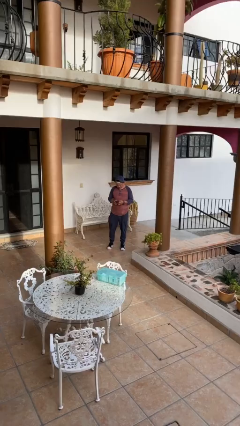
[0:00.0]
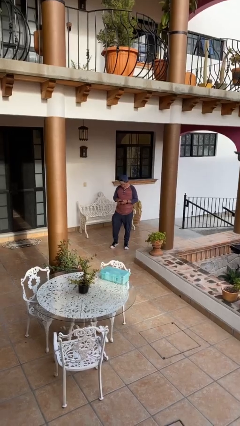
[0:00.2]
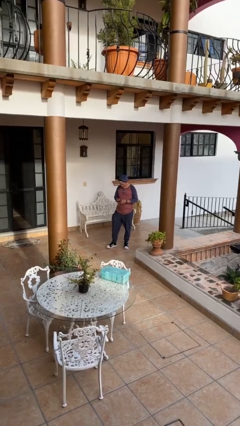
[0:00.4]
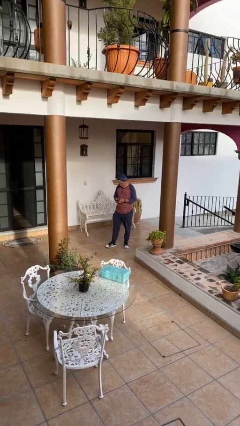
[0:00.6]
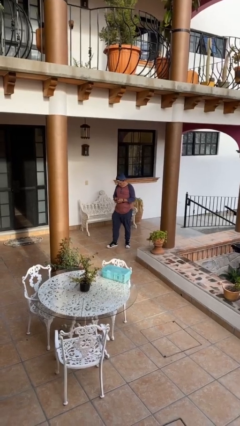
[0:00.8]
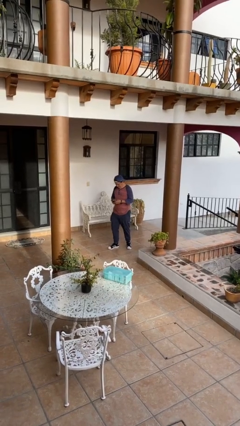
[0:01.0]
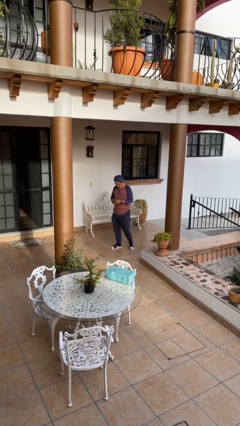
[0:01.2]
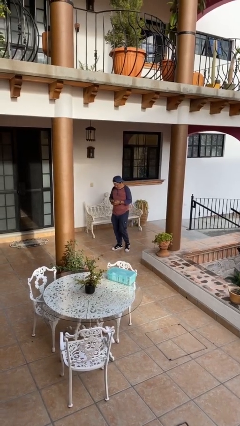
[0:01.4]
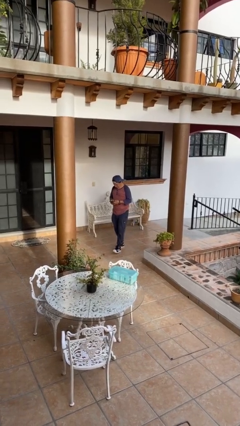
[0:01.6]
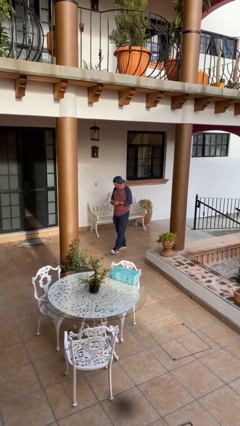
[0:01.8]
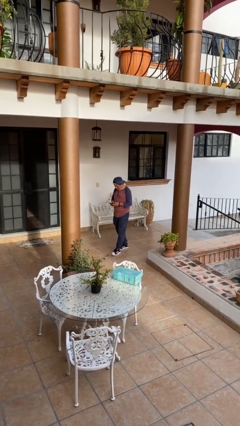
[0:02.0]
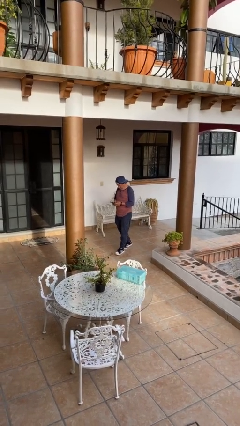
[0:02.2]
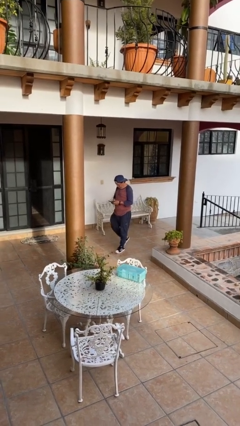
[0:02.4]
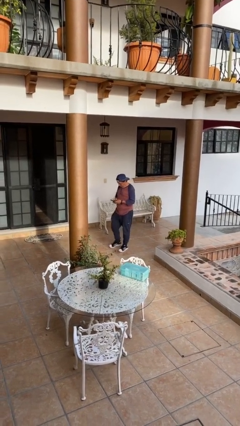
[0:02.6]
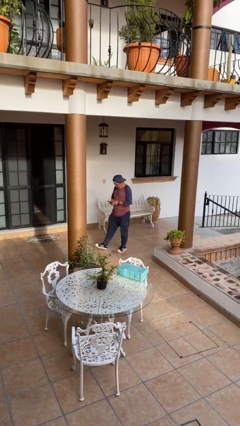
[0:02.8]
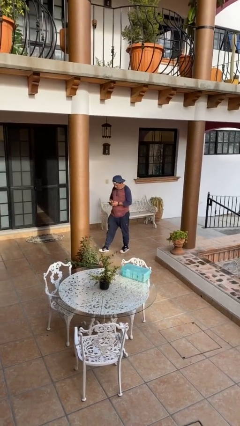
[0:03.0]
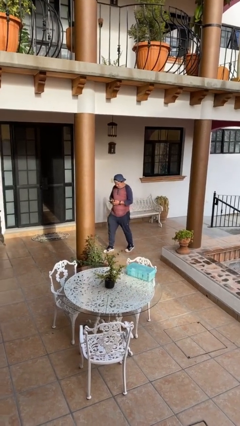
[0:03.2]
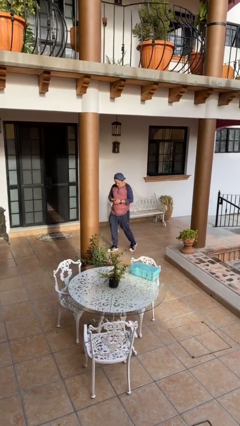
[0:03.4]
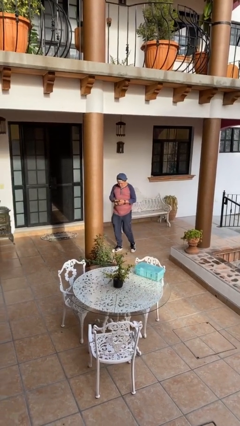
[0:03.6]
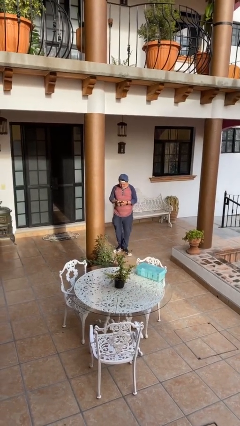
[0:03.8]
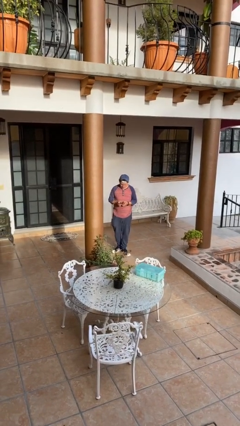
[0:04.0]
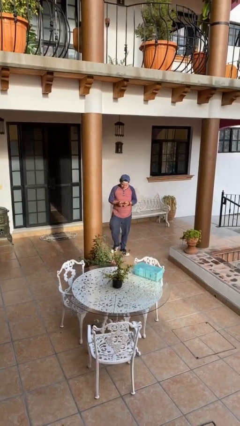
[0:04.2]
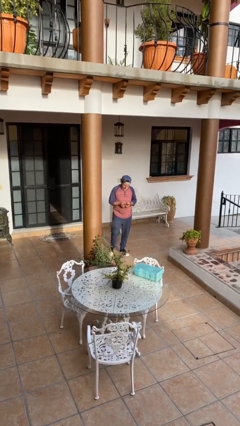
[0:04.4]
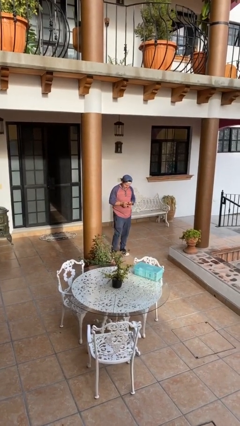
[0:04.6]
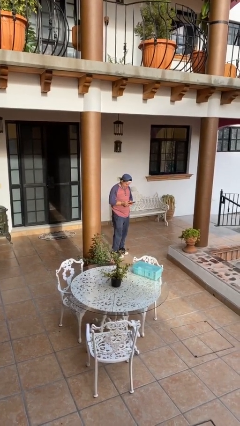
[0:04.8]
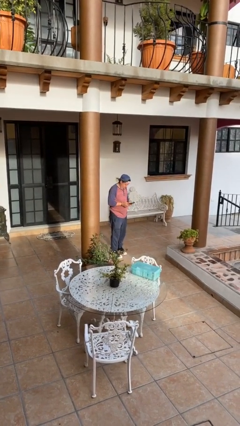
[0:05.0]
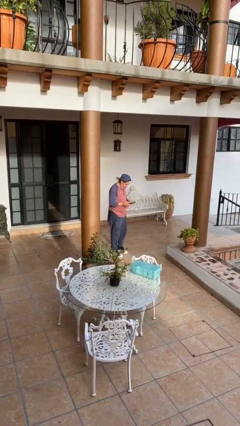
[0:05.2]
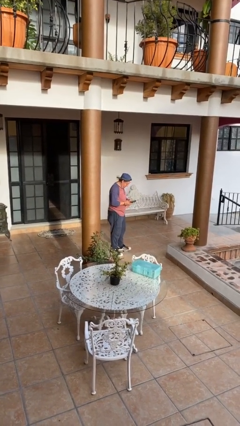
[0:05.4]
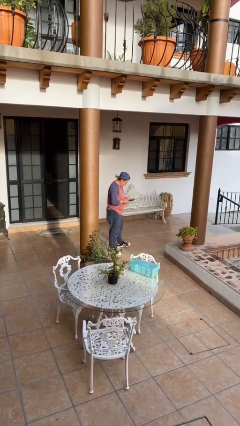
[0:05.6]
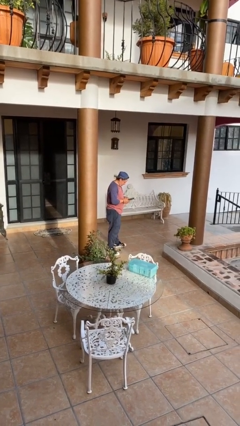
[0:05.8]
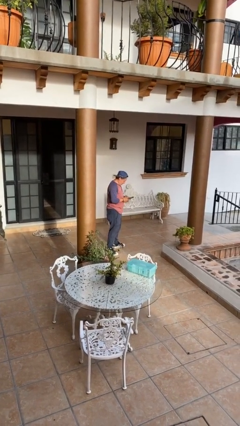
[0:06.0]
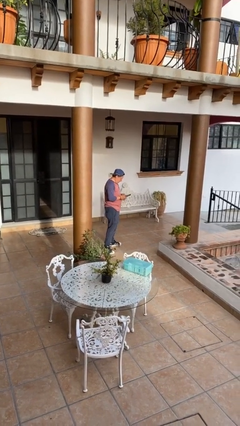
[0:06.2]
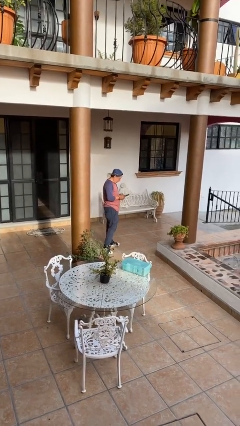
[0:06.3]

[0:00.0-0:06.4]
person texts on phone

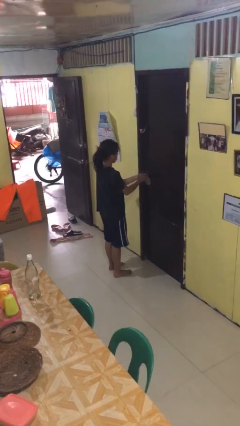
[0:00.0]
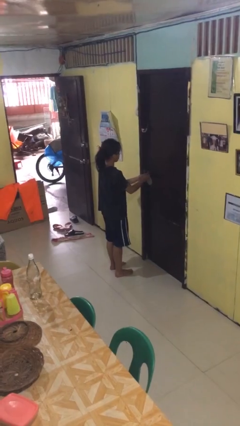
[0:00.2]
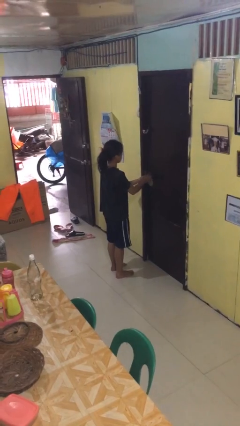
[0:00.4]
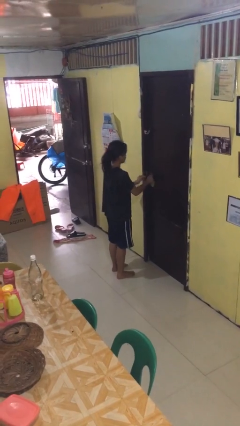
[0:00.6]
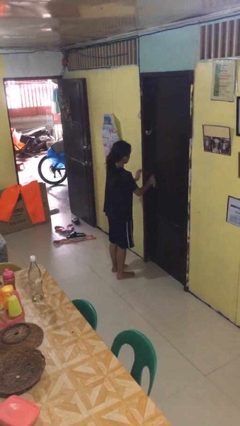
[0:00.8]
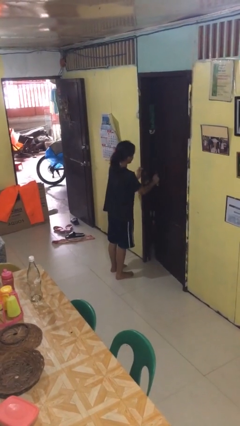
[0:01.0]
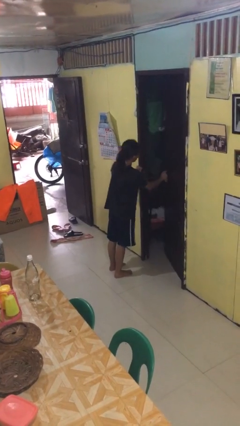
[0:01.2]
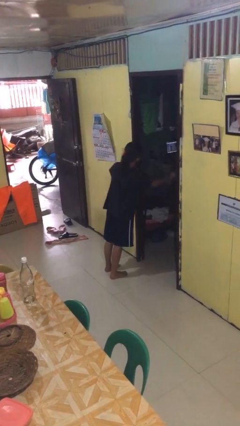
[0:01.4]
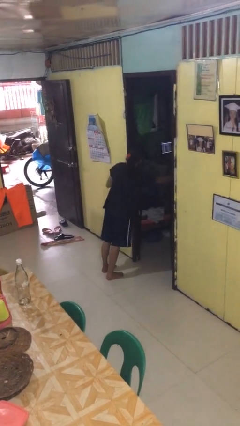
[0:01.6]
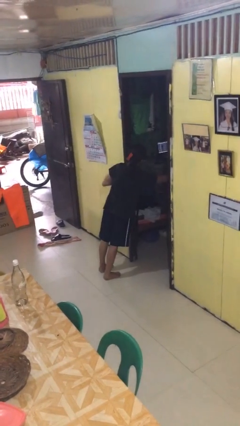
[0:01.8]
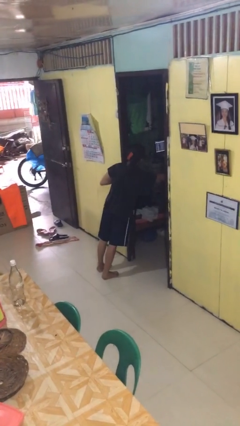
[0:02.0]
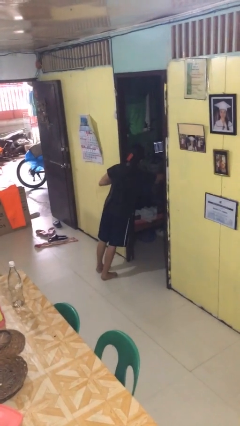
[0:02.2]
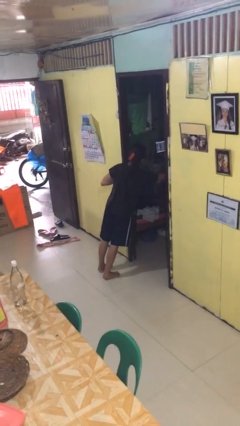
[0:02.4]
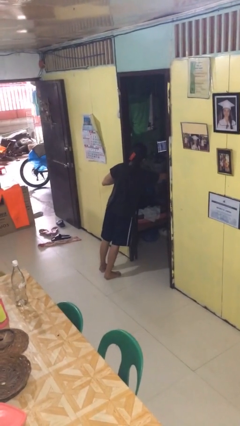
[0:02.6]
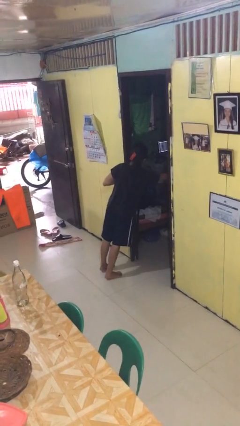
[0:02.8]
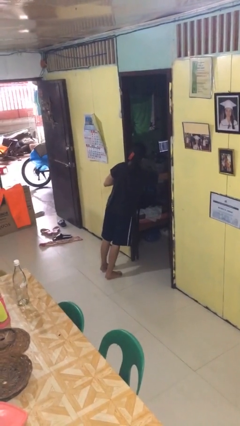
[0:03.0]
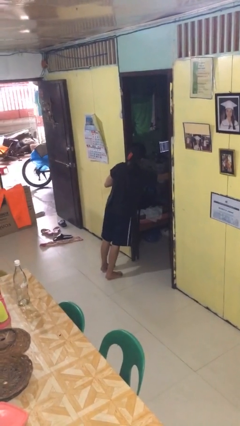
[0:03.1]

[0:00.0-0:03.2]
person opens facility door

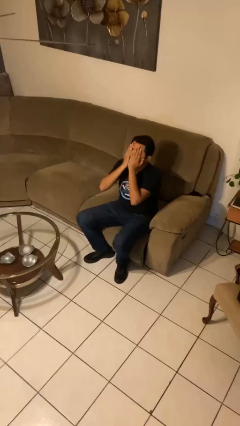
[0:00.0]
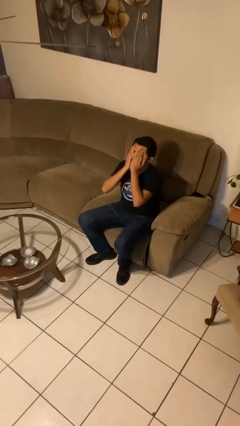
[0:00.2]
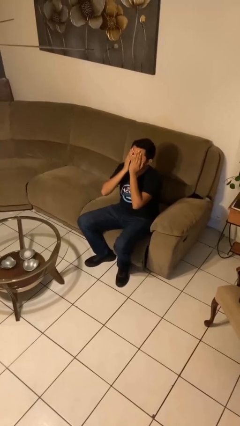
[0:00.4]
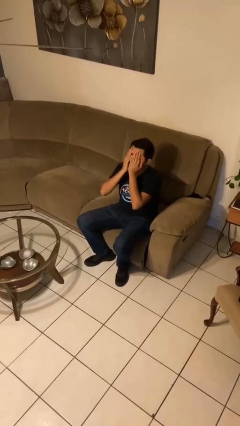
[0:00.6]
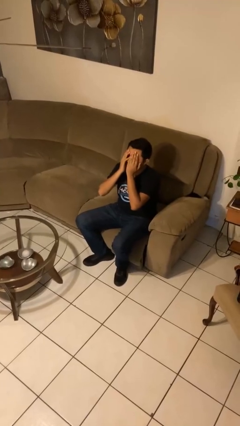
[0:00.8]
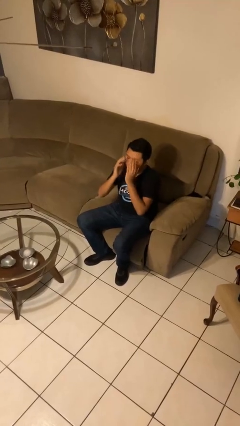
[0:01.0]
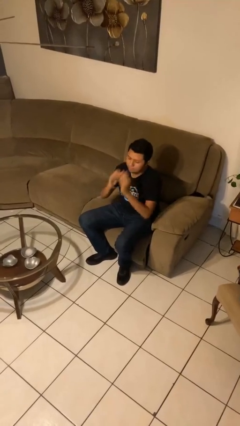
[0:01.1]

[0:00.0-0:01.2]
person covers face with hands

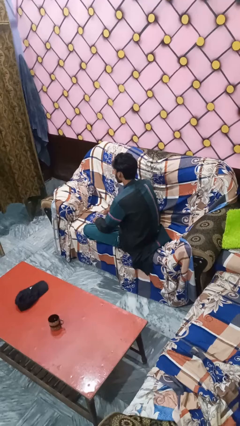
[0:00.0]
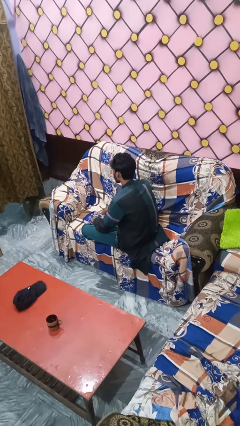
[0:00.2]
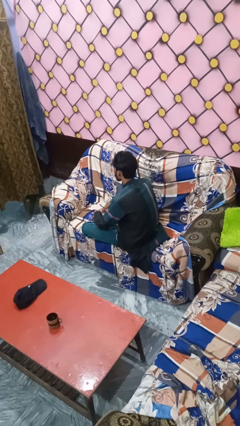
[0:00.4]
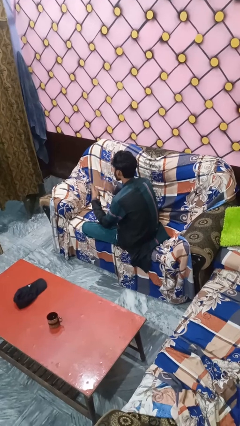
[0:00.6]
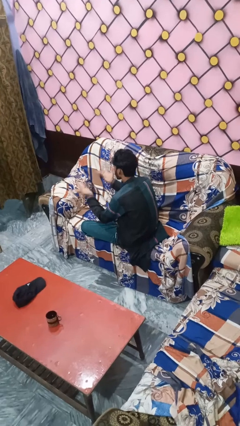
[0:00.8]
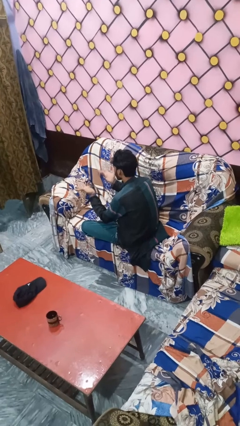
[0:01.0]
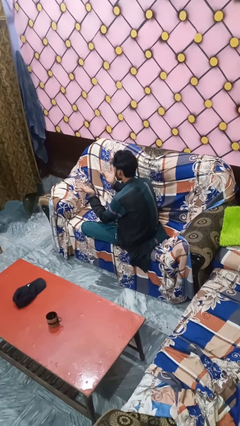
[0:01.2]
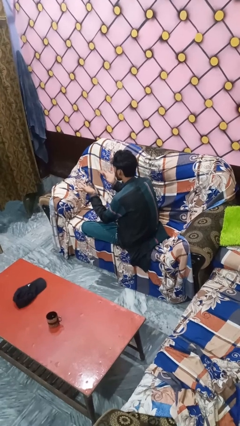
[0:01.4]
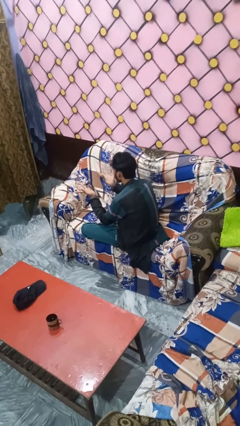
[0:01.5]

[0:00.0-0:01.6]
person holds object above head

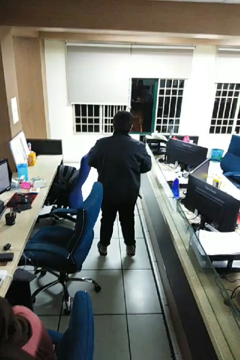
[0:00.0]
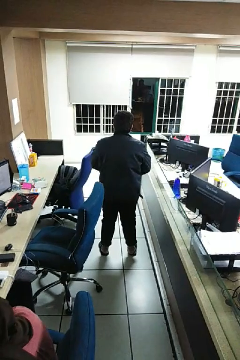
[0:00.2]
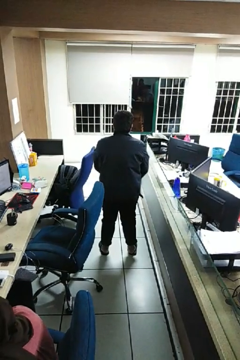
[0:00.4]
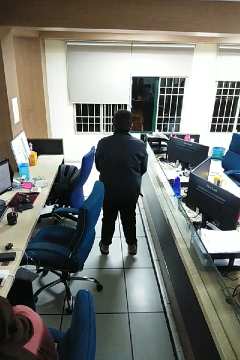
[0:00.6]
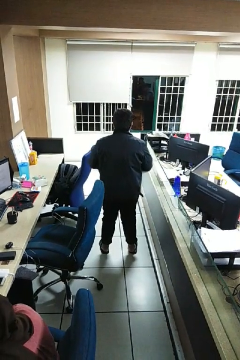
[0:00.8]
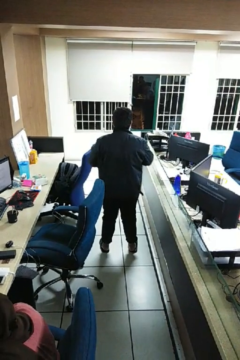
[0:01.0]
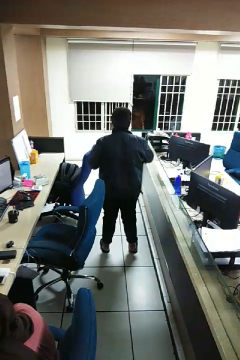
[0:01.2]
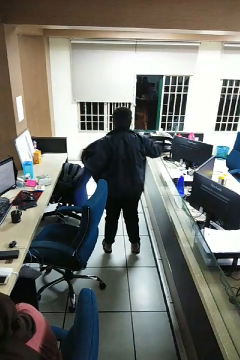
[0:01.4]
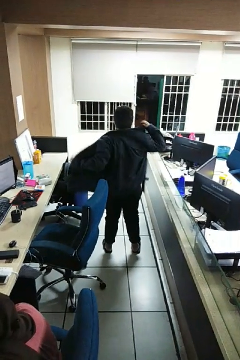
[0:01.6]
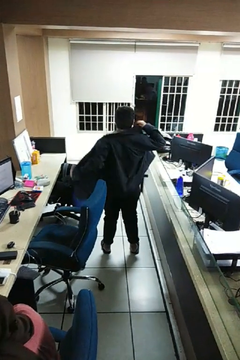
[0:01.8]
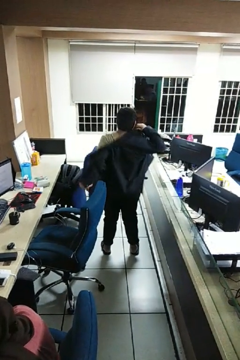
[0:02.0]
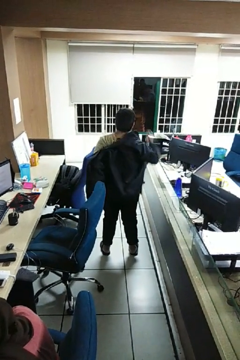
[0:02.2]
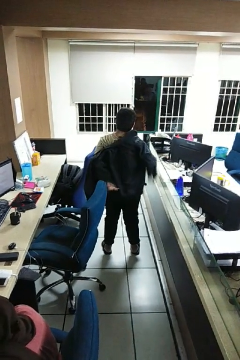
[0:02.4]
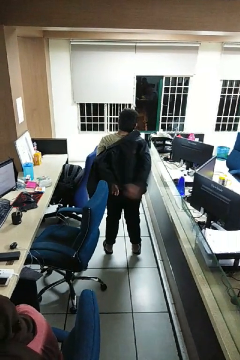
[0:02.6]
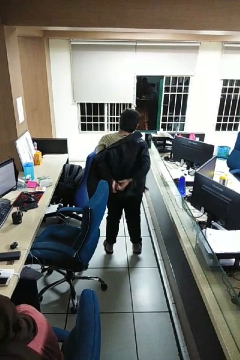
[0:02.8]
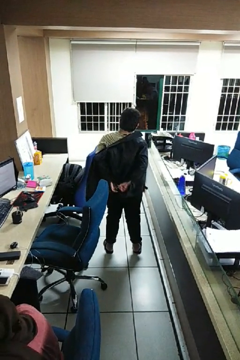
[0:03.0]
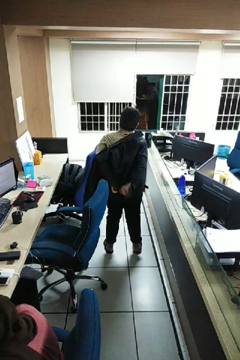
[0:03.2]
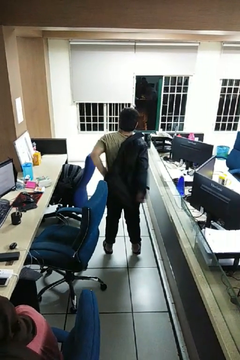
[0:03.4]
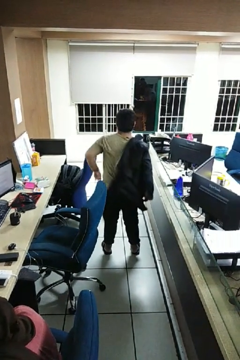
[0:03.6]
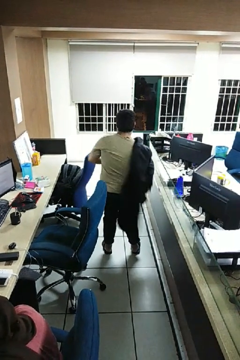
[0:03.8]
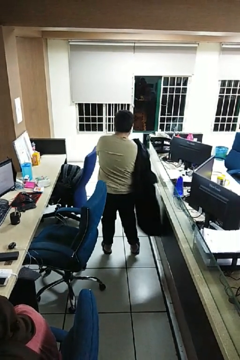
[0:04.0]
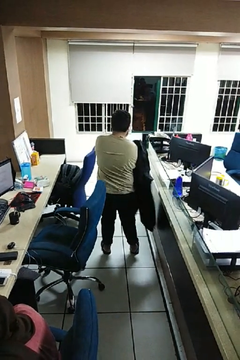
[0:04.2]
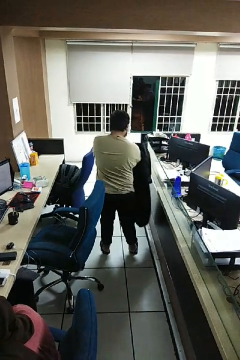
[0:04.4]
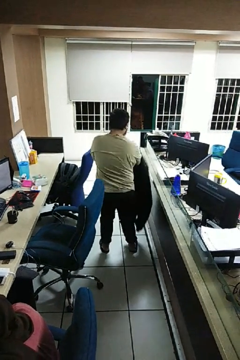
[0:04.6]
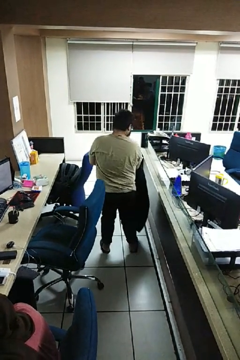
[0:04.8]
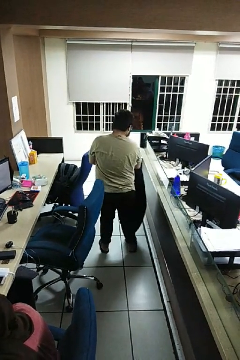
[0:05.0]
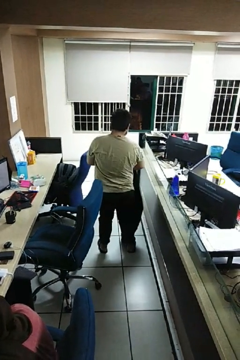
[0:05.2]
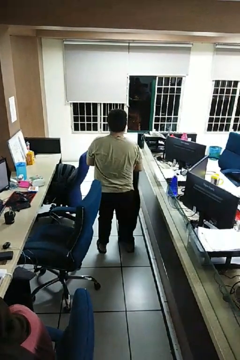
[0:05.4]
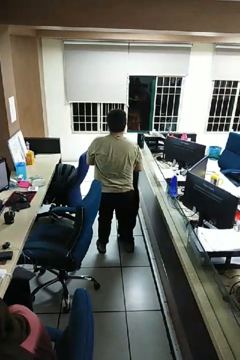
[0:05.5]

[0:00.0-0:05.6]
person takes off shirt

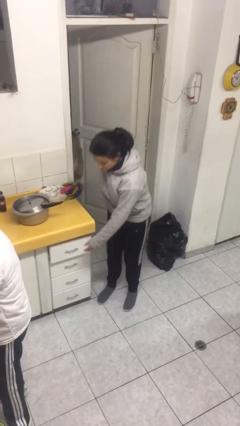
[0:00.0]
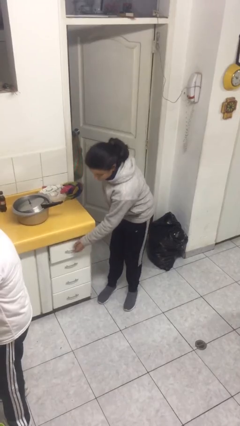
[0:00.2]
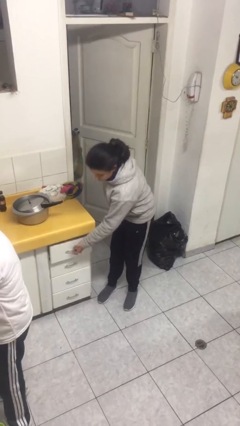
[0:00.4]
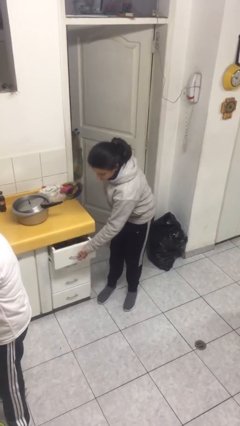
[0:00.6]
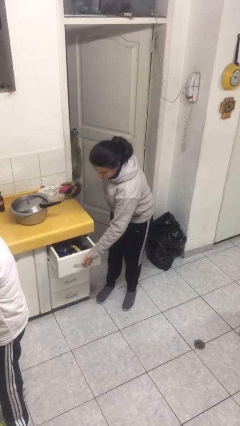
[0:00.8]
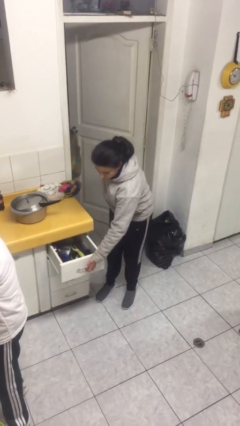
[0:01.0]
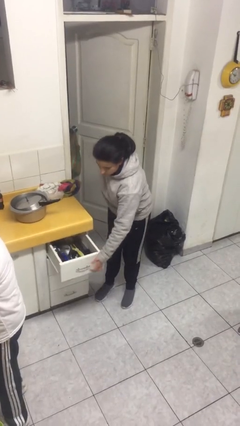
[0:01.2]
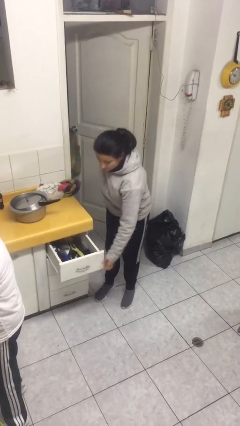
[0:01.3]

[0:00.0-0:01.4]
person opens kitchen drawer
